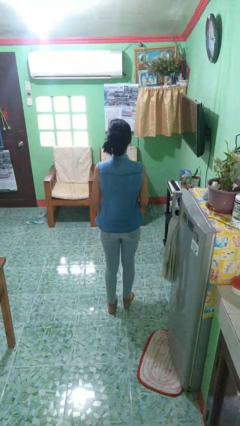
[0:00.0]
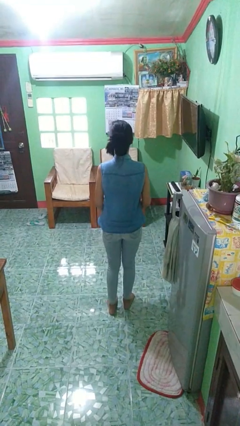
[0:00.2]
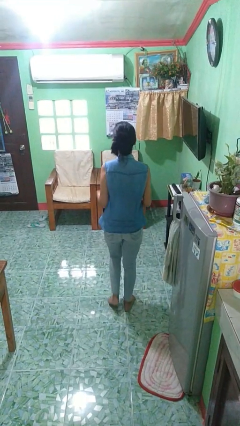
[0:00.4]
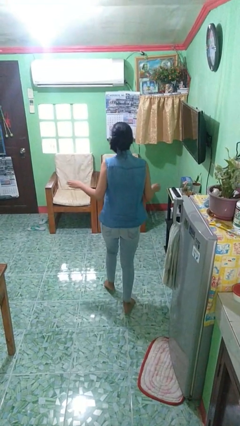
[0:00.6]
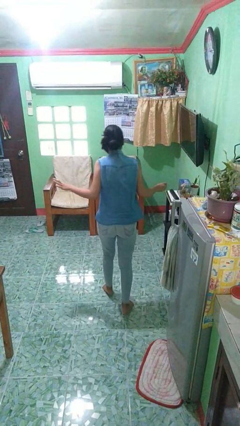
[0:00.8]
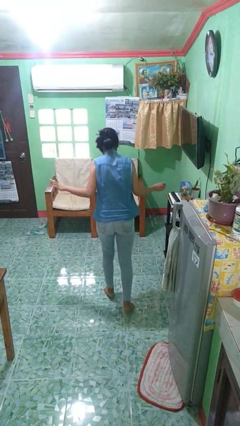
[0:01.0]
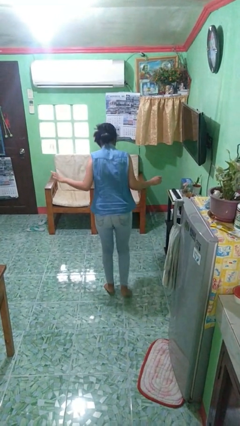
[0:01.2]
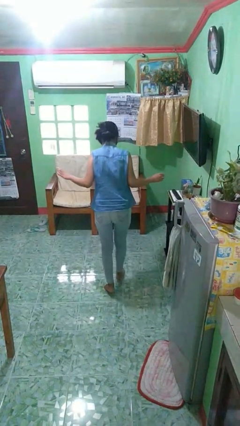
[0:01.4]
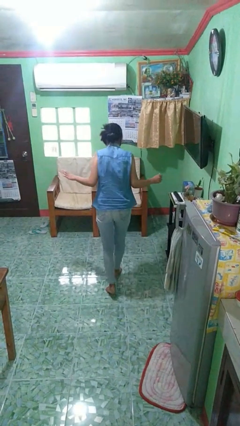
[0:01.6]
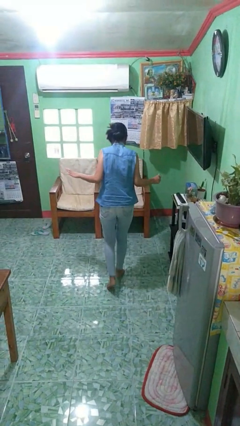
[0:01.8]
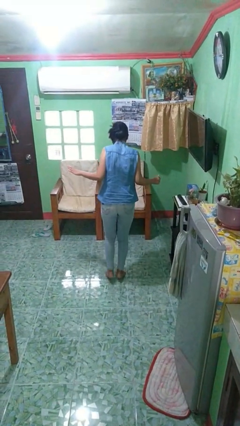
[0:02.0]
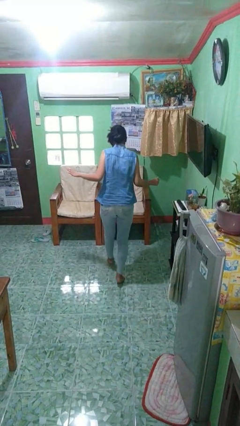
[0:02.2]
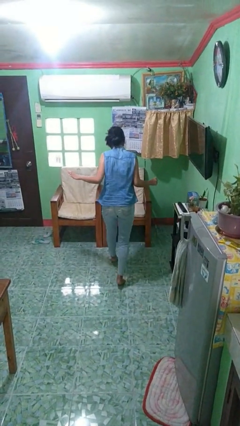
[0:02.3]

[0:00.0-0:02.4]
person walks tiptoe

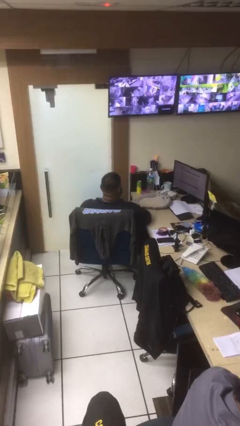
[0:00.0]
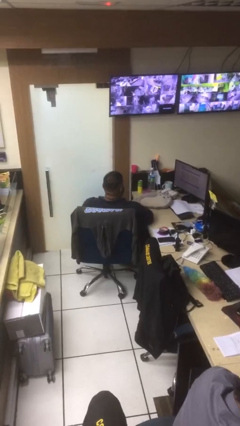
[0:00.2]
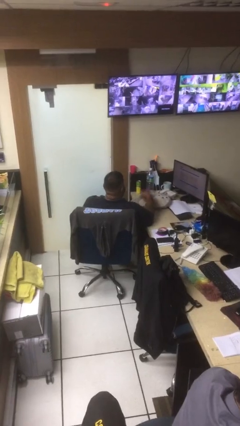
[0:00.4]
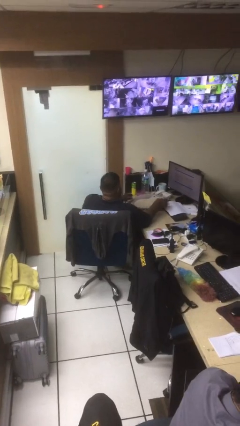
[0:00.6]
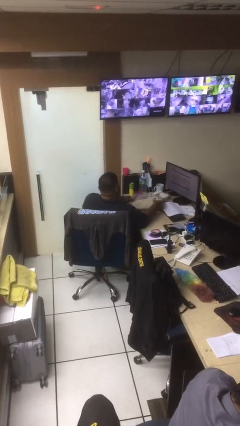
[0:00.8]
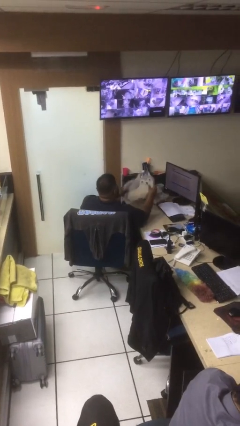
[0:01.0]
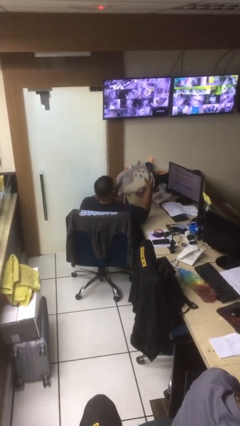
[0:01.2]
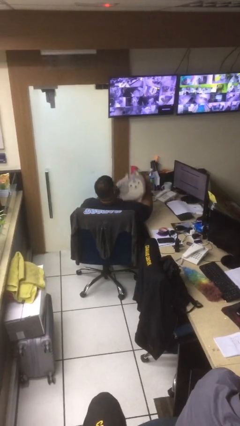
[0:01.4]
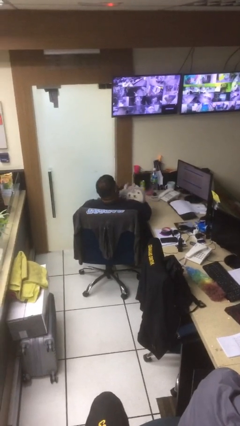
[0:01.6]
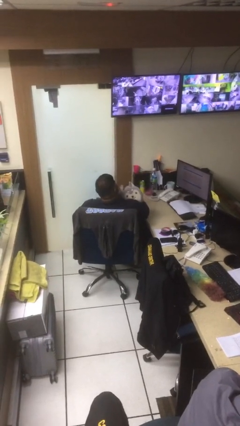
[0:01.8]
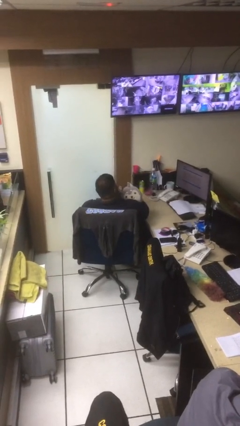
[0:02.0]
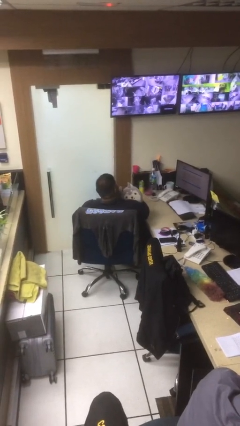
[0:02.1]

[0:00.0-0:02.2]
person hugs stuffed animal

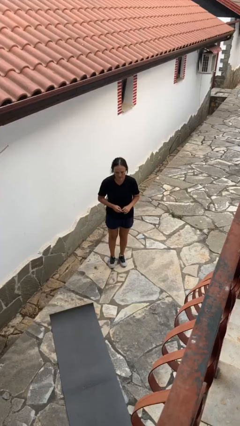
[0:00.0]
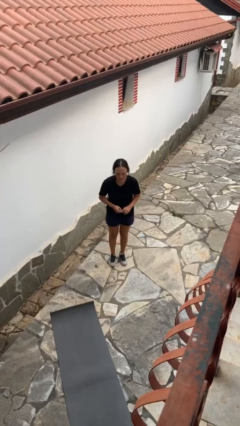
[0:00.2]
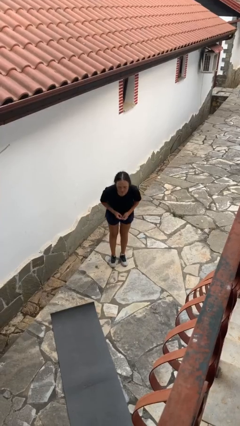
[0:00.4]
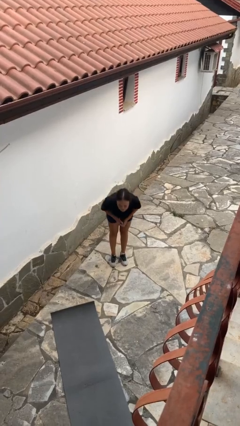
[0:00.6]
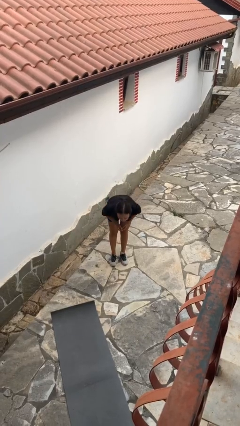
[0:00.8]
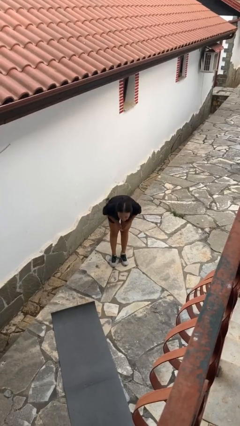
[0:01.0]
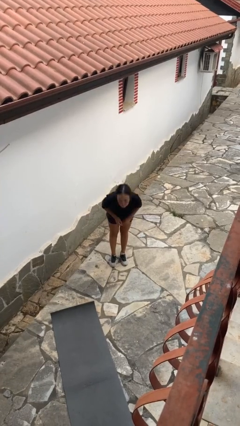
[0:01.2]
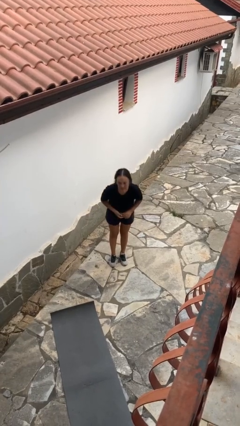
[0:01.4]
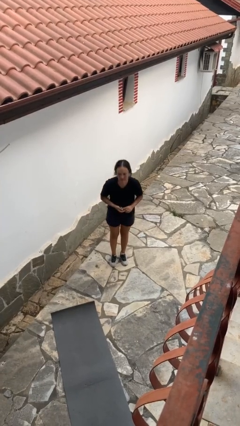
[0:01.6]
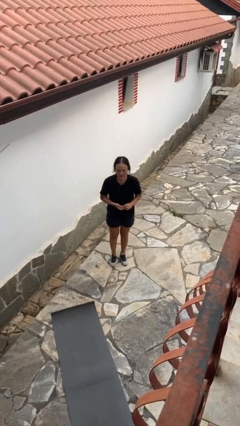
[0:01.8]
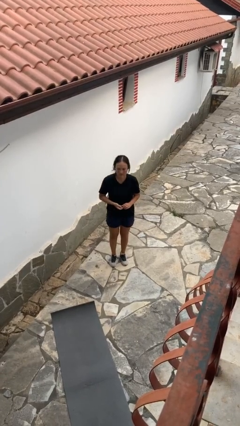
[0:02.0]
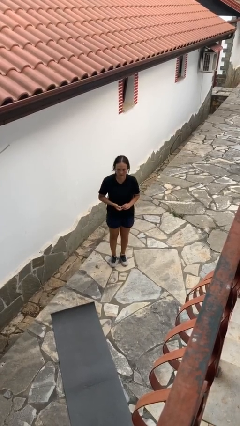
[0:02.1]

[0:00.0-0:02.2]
person bows

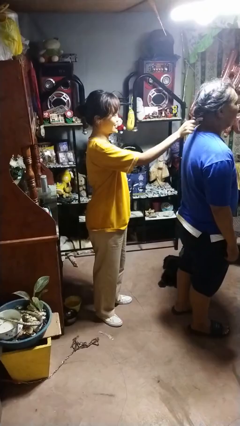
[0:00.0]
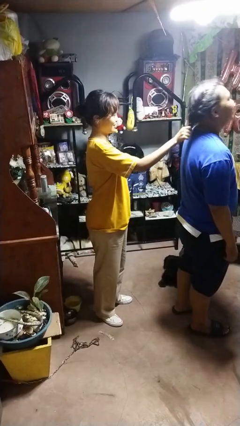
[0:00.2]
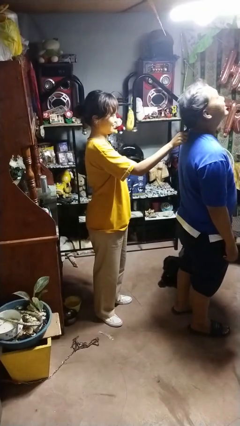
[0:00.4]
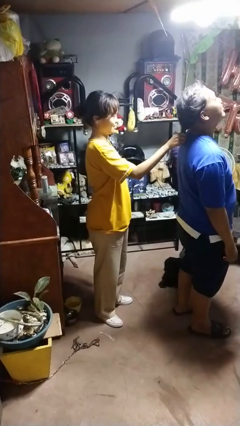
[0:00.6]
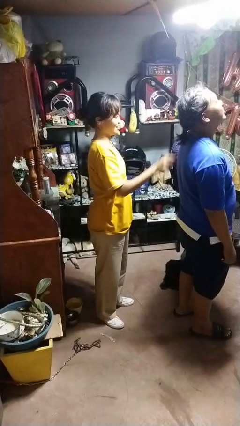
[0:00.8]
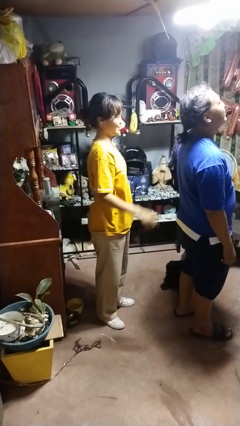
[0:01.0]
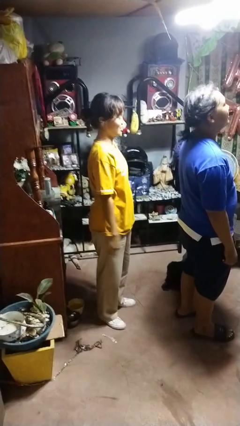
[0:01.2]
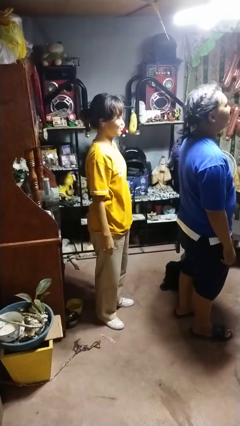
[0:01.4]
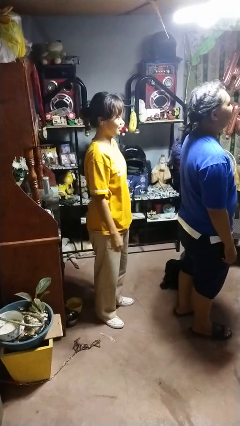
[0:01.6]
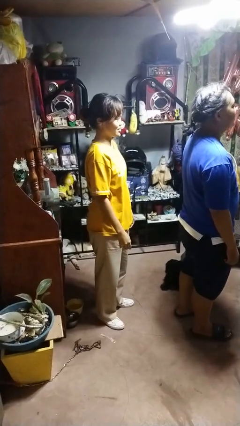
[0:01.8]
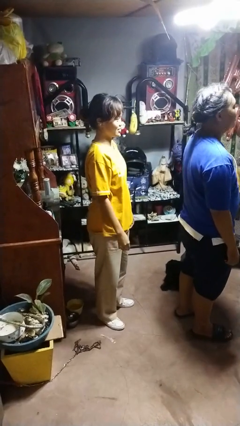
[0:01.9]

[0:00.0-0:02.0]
person grabs person by hair

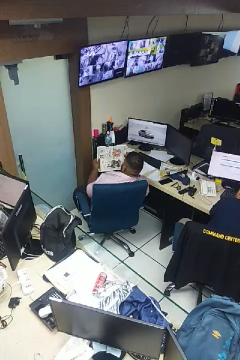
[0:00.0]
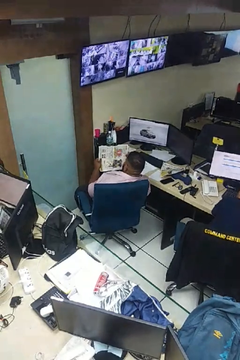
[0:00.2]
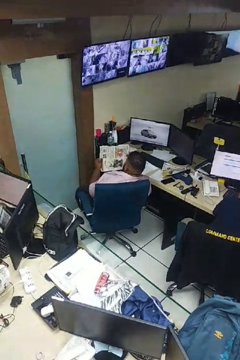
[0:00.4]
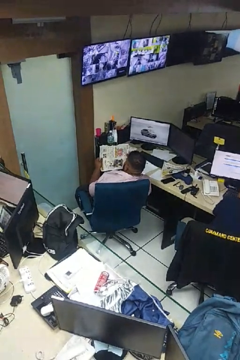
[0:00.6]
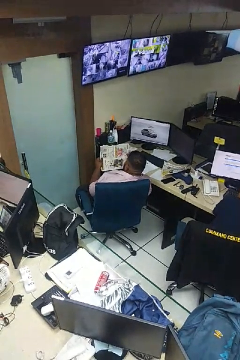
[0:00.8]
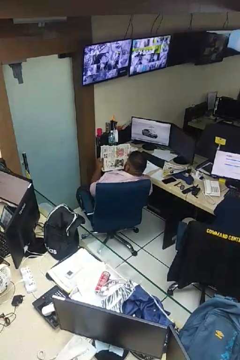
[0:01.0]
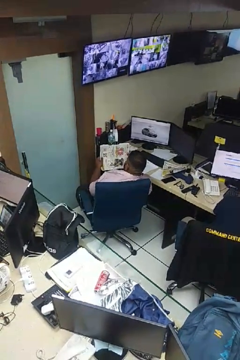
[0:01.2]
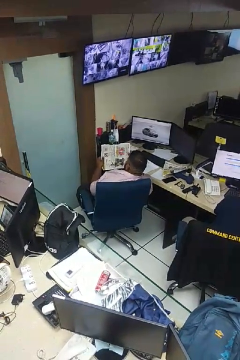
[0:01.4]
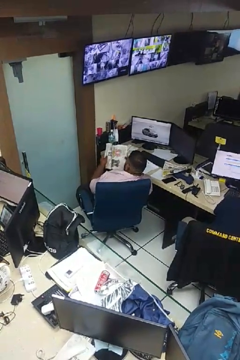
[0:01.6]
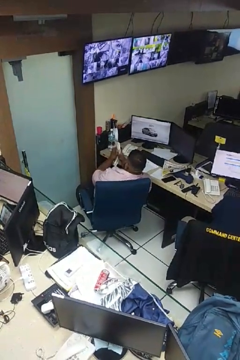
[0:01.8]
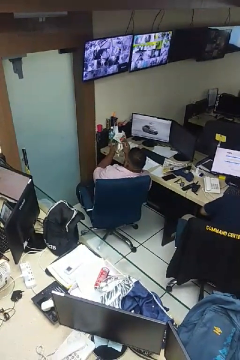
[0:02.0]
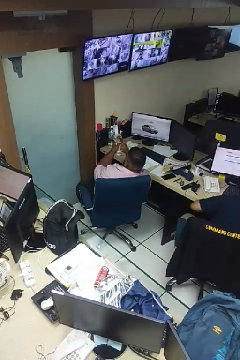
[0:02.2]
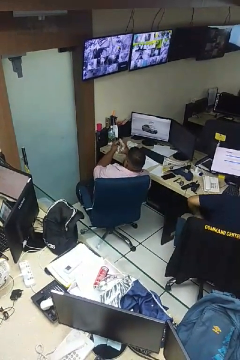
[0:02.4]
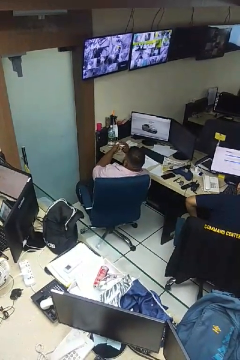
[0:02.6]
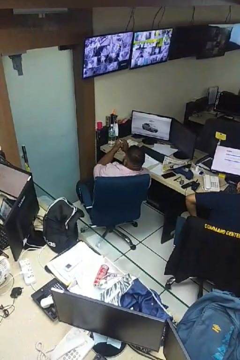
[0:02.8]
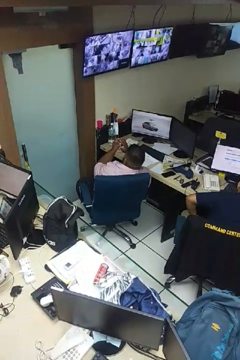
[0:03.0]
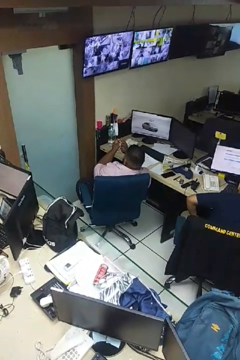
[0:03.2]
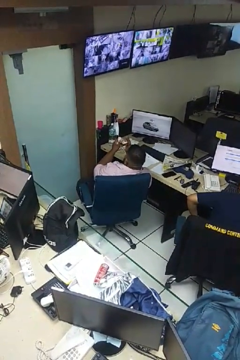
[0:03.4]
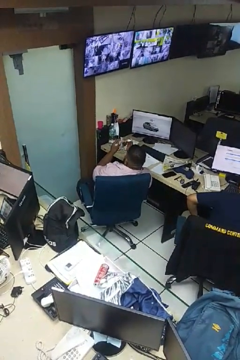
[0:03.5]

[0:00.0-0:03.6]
person crumples paper

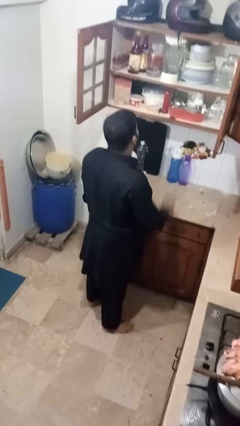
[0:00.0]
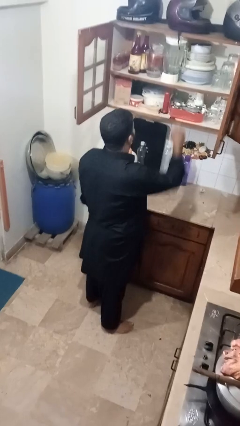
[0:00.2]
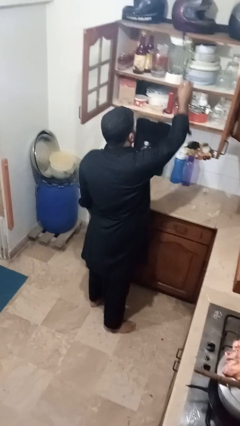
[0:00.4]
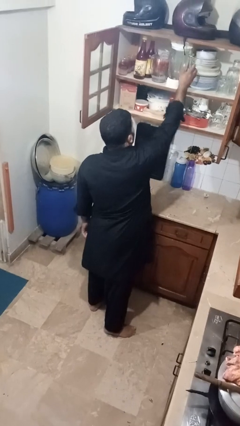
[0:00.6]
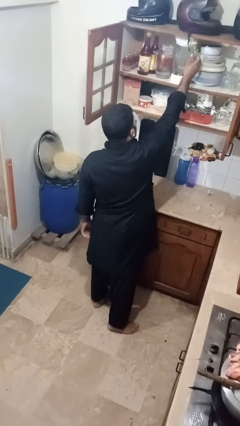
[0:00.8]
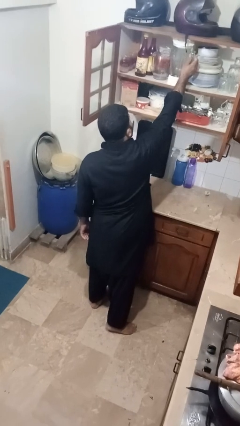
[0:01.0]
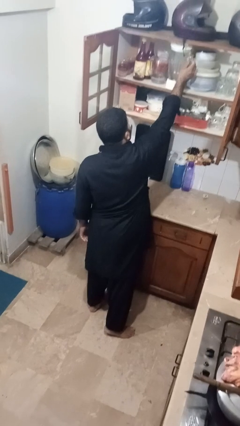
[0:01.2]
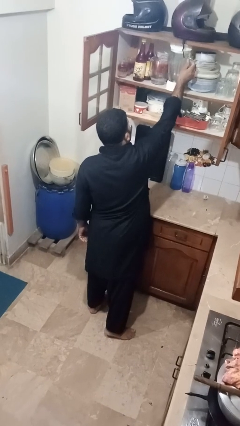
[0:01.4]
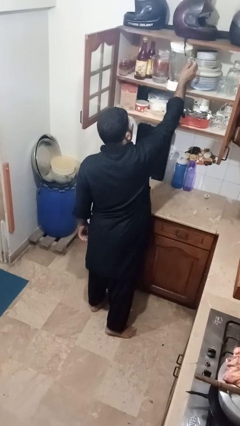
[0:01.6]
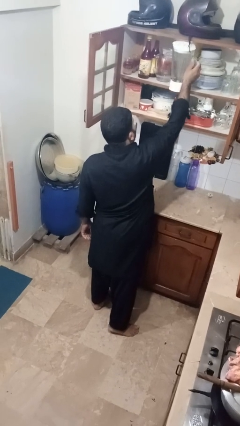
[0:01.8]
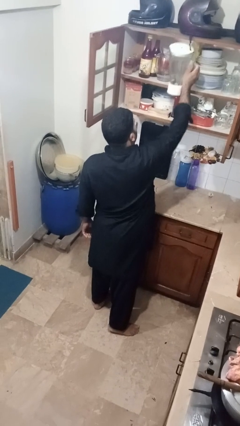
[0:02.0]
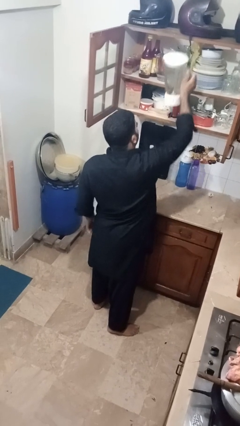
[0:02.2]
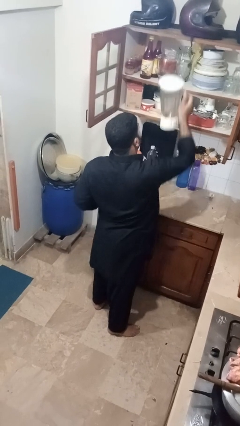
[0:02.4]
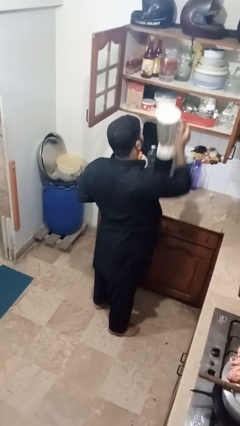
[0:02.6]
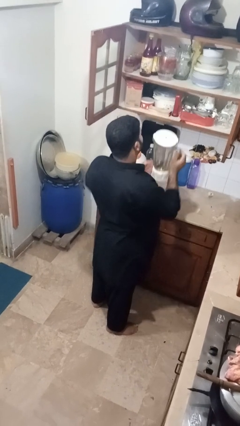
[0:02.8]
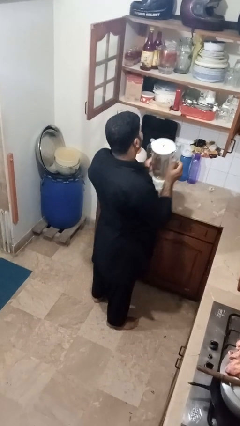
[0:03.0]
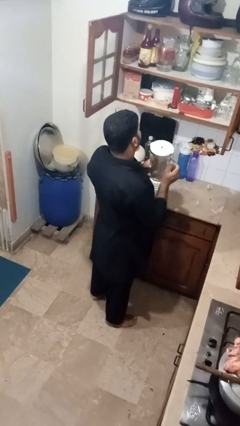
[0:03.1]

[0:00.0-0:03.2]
person picks up object from cabinet

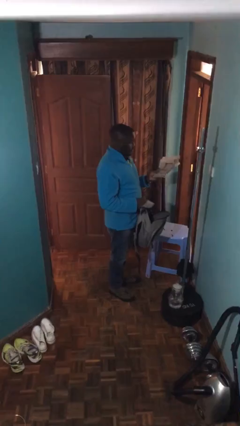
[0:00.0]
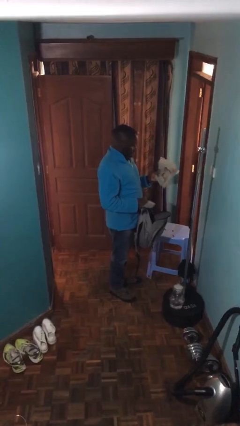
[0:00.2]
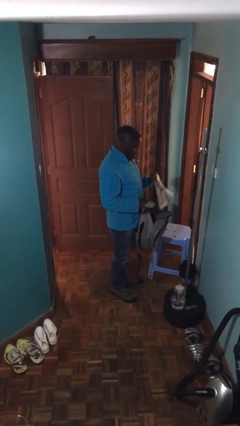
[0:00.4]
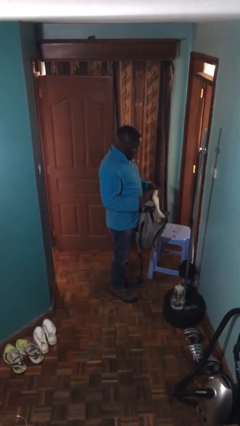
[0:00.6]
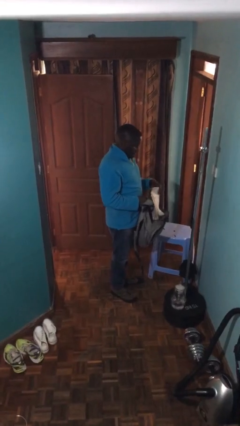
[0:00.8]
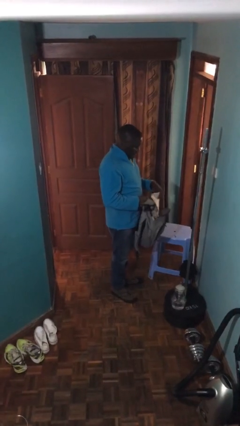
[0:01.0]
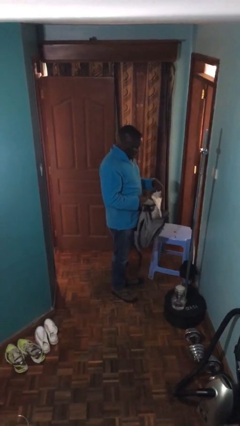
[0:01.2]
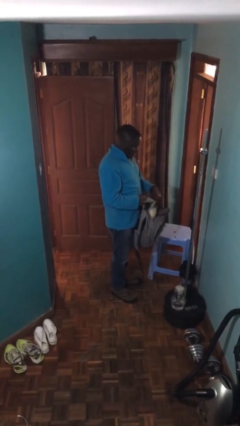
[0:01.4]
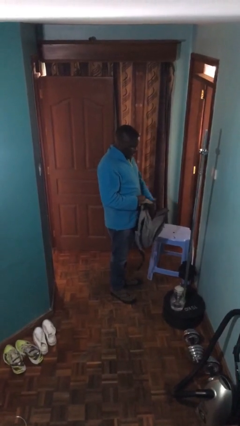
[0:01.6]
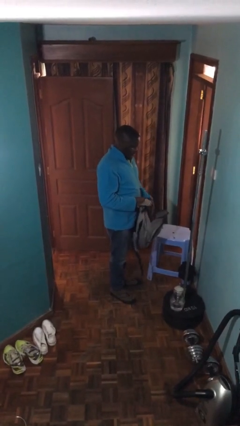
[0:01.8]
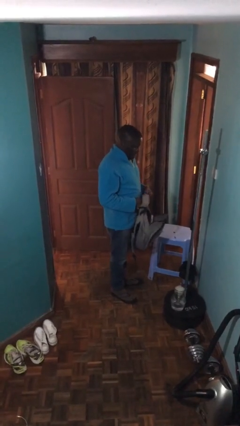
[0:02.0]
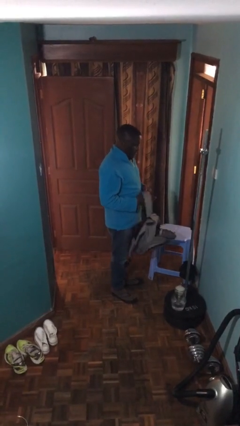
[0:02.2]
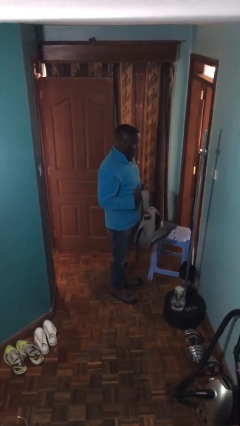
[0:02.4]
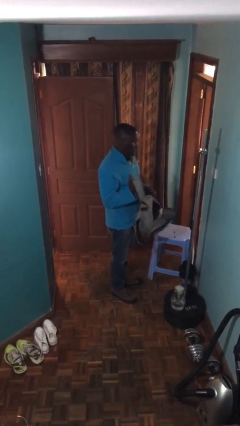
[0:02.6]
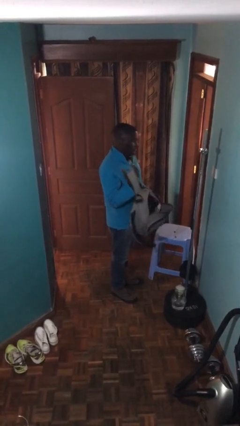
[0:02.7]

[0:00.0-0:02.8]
person puts object into backpack
